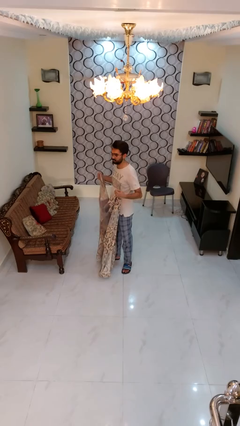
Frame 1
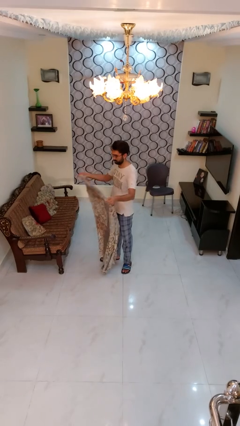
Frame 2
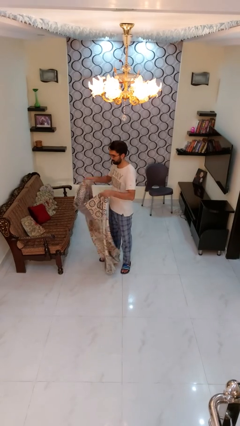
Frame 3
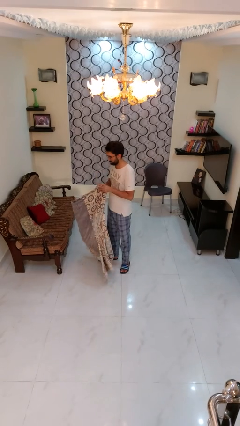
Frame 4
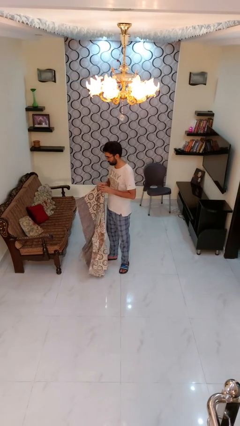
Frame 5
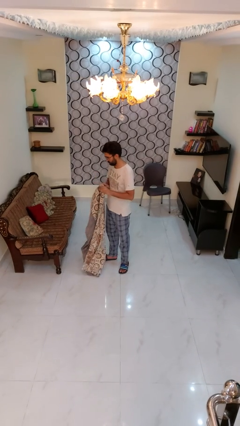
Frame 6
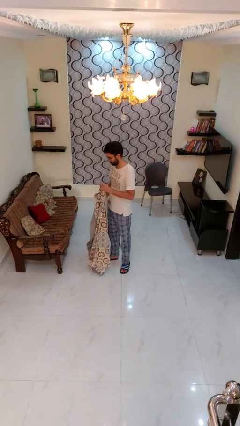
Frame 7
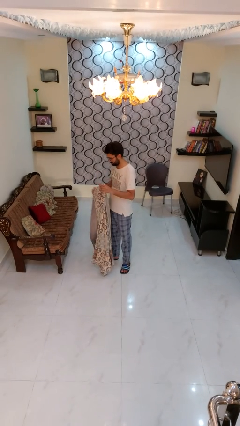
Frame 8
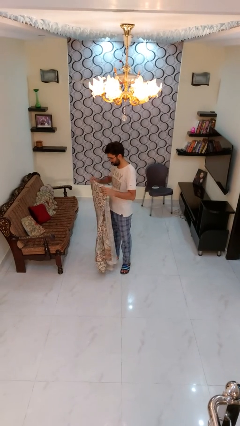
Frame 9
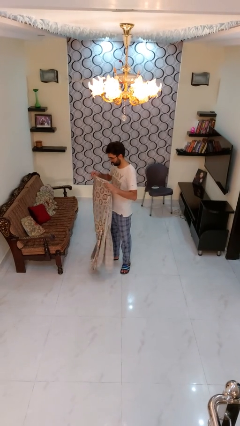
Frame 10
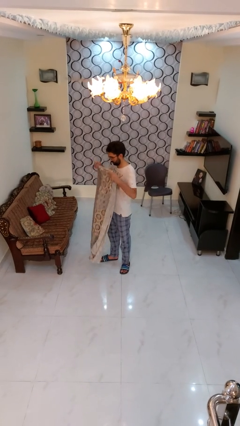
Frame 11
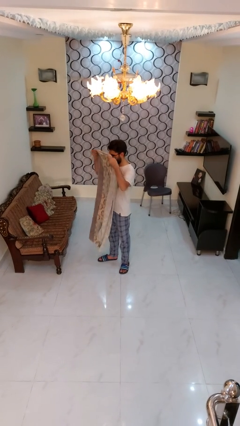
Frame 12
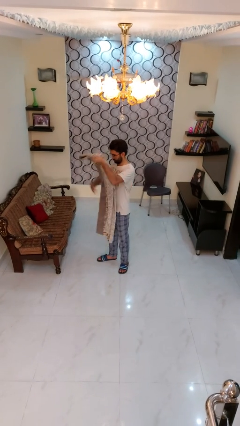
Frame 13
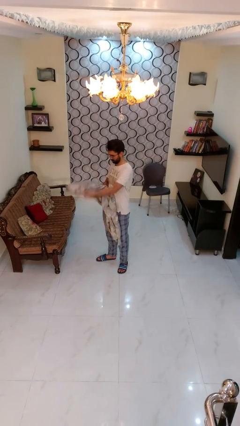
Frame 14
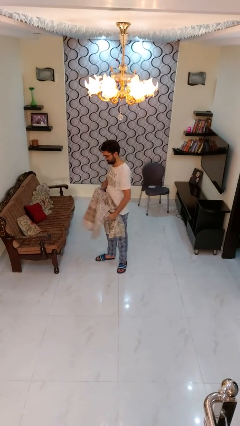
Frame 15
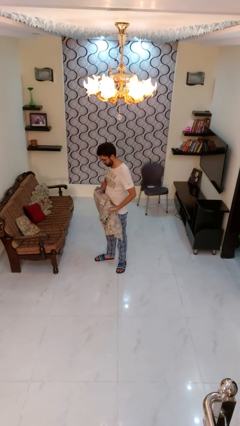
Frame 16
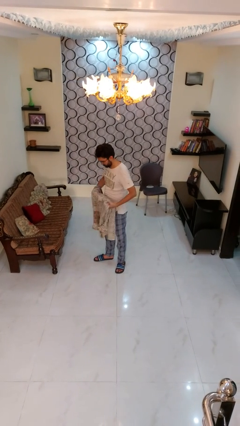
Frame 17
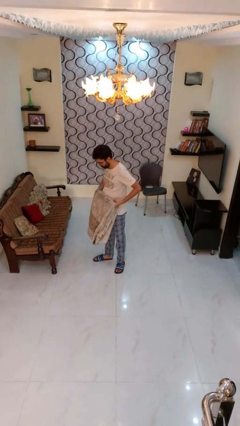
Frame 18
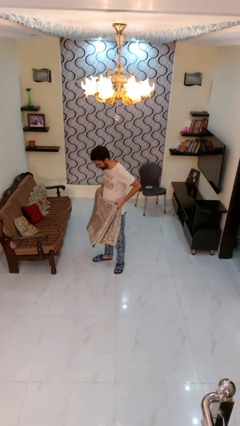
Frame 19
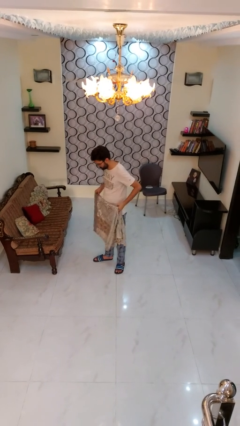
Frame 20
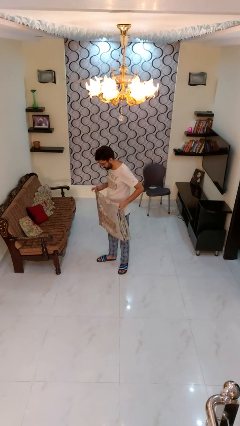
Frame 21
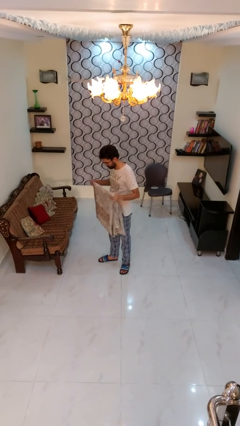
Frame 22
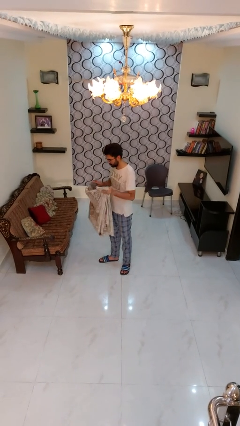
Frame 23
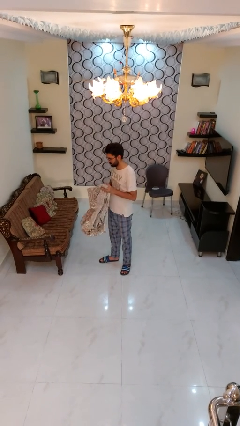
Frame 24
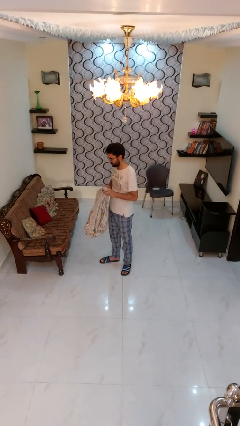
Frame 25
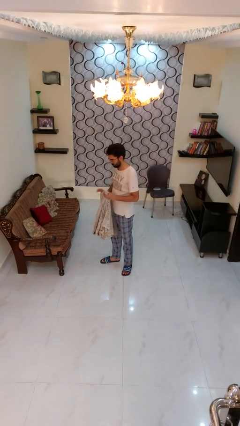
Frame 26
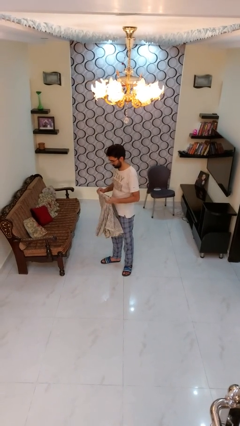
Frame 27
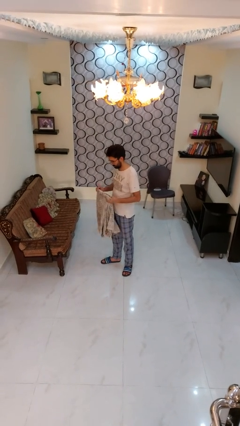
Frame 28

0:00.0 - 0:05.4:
person folds blanket

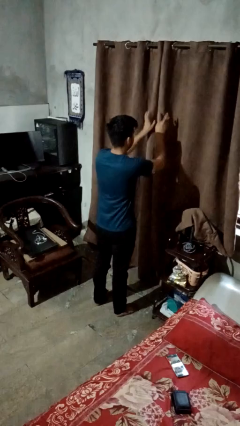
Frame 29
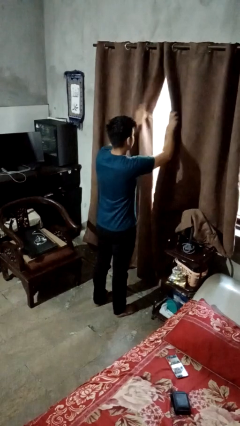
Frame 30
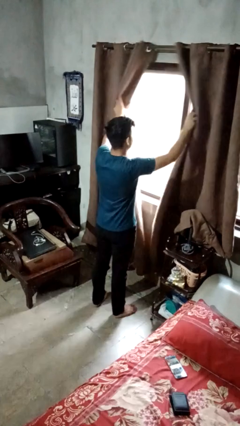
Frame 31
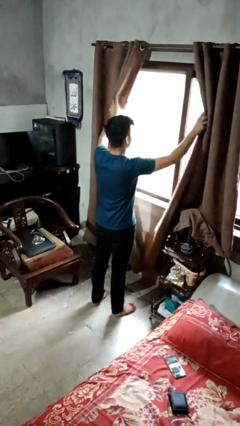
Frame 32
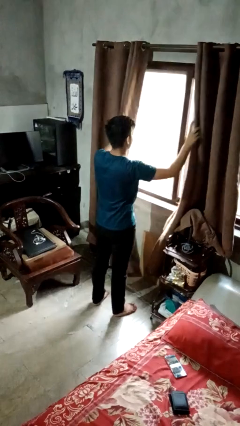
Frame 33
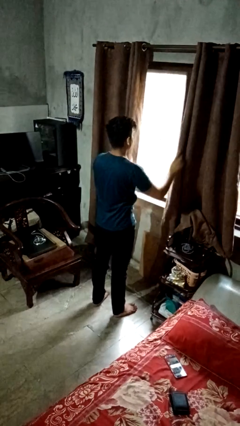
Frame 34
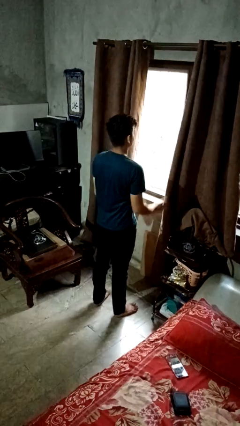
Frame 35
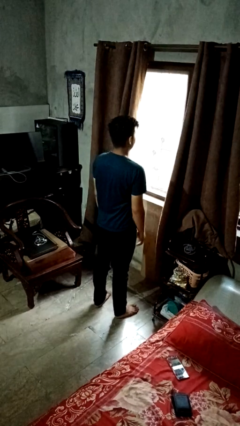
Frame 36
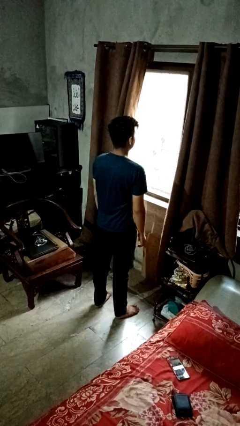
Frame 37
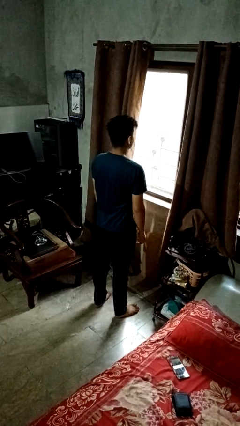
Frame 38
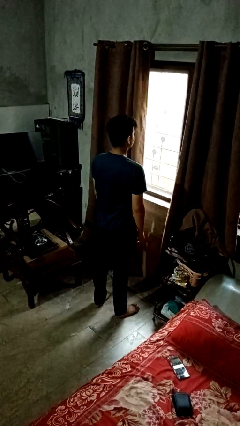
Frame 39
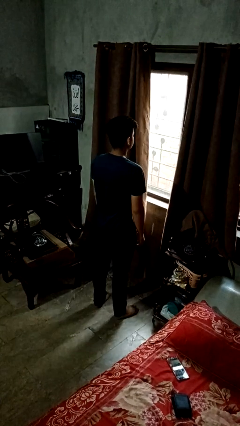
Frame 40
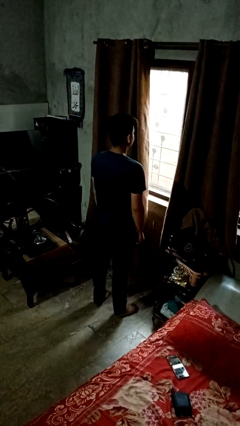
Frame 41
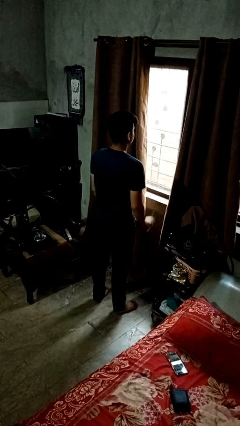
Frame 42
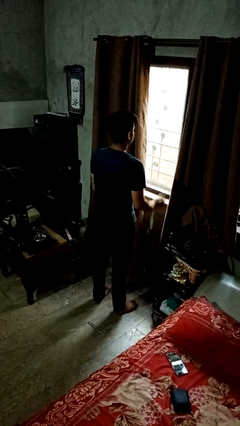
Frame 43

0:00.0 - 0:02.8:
person opens curtains

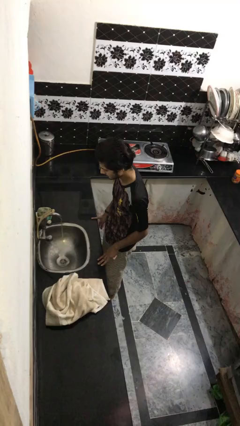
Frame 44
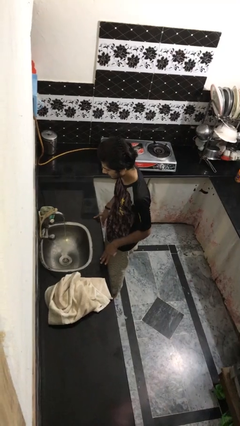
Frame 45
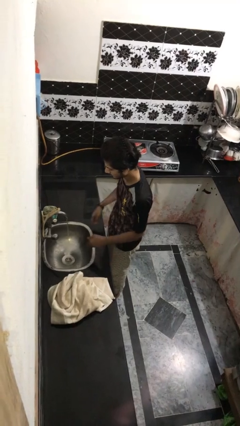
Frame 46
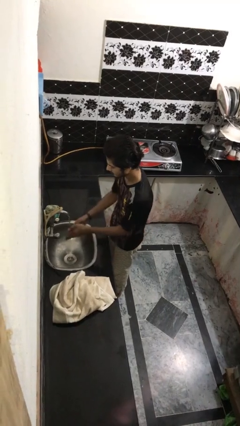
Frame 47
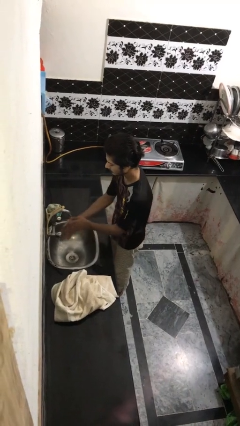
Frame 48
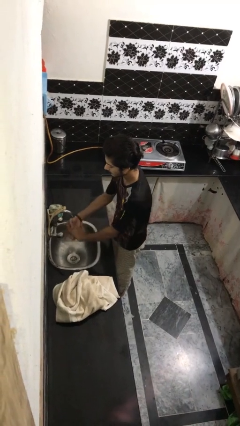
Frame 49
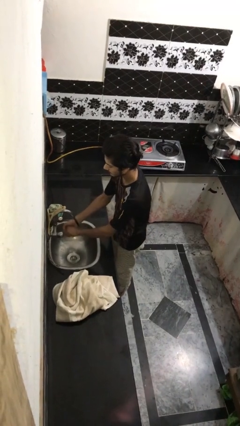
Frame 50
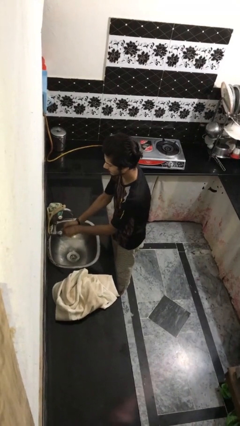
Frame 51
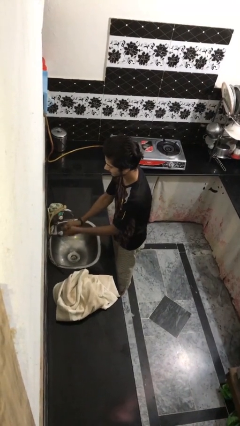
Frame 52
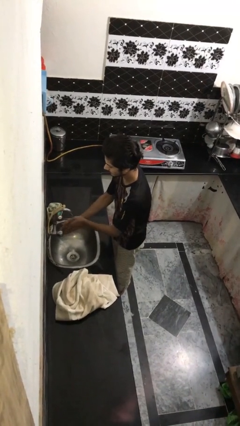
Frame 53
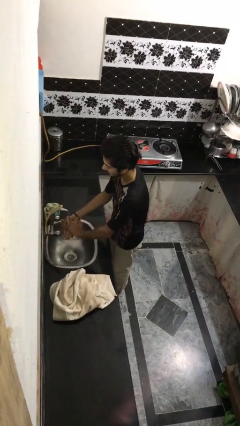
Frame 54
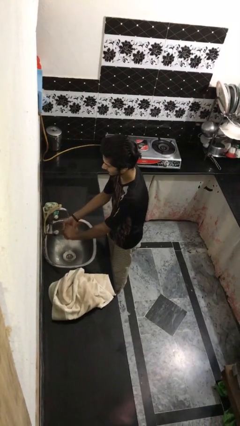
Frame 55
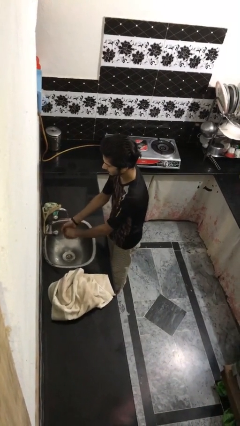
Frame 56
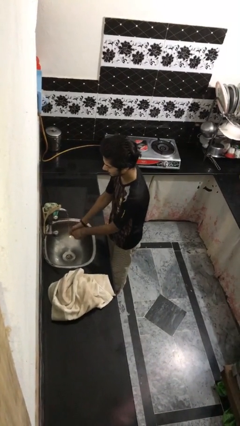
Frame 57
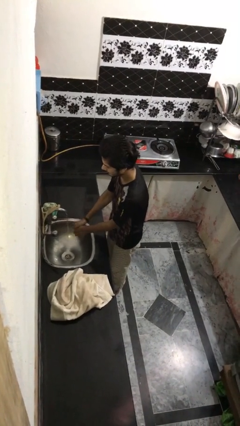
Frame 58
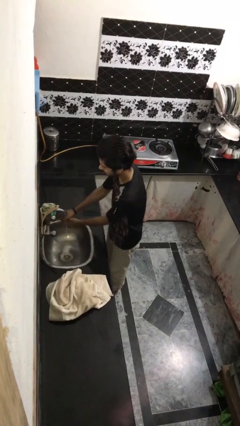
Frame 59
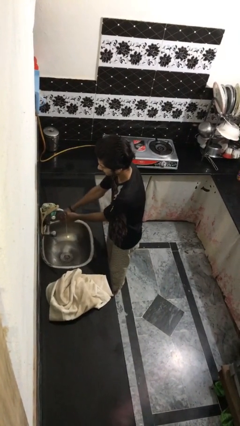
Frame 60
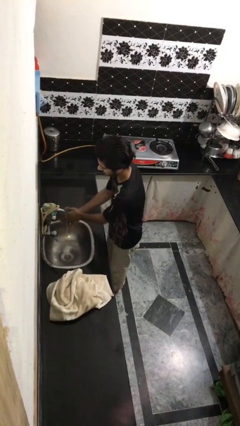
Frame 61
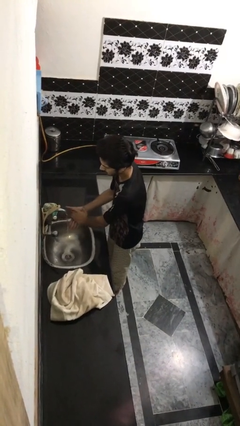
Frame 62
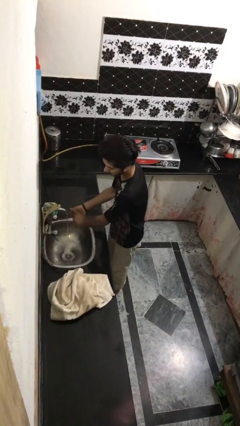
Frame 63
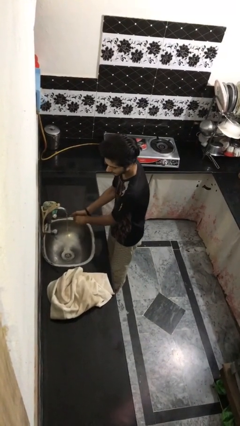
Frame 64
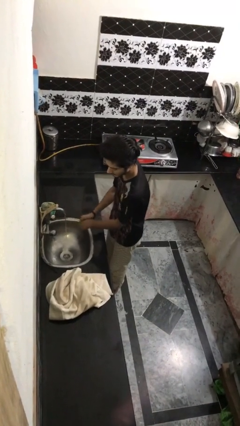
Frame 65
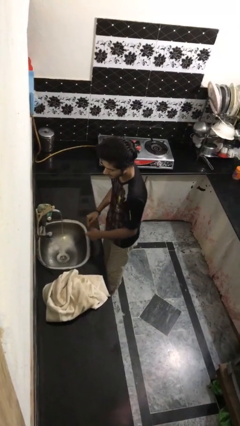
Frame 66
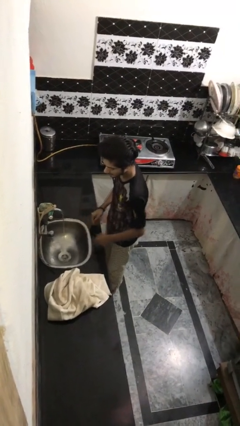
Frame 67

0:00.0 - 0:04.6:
person washes face

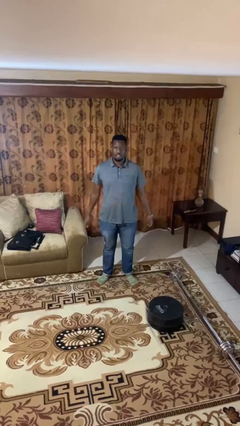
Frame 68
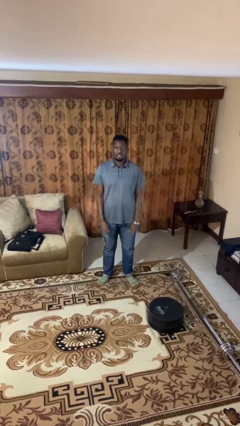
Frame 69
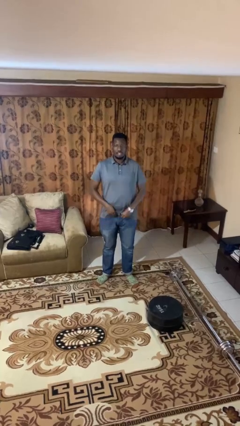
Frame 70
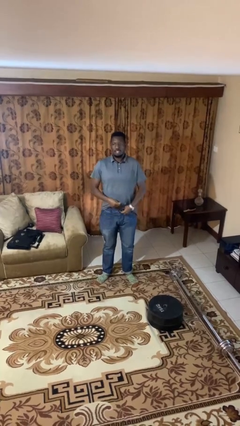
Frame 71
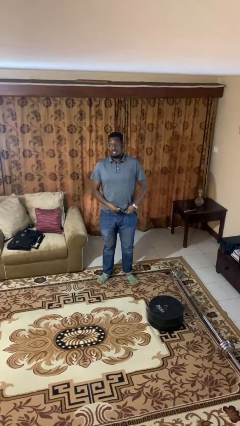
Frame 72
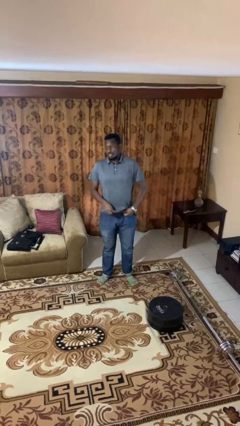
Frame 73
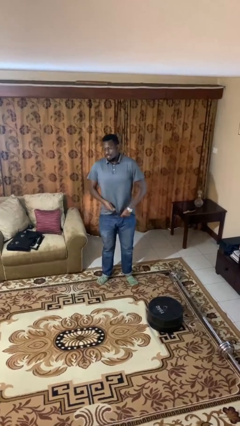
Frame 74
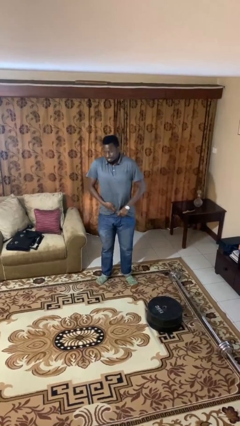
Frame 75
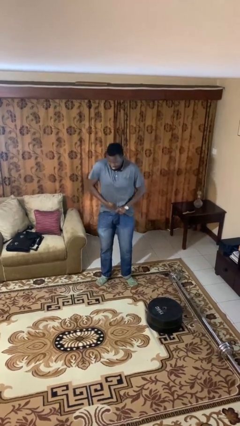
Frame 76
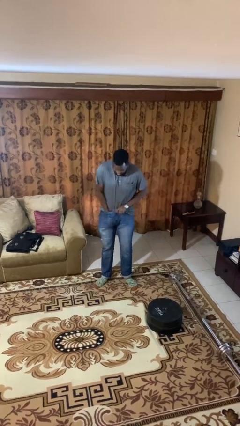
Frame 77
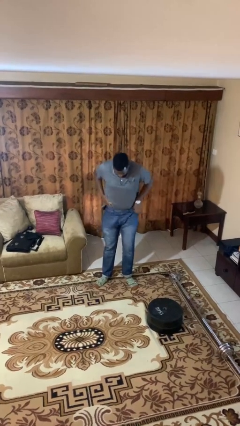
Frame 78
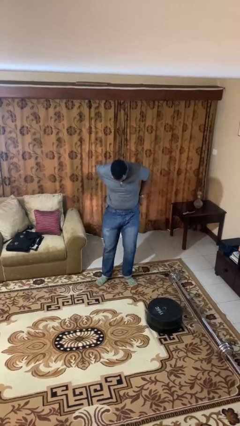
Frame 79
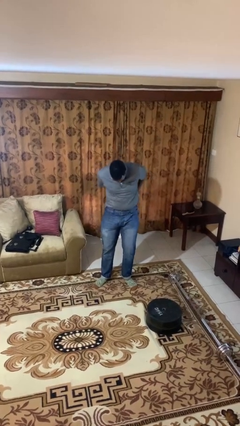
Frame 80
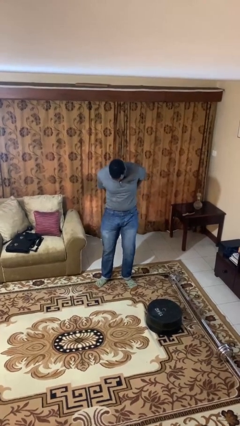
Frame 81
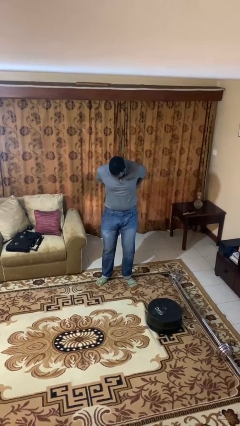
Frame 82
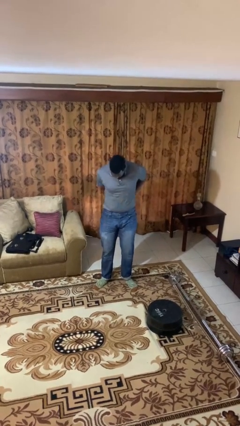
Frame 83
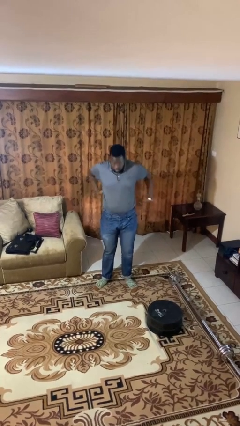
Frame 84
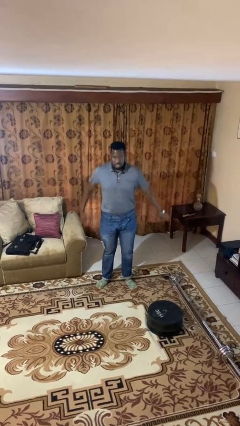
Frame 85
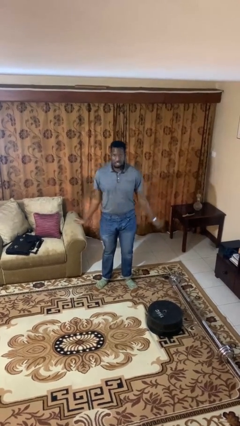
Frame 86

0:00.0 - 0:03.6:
person tucks in shirt

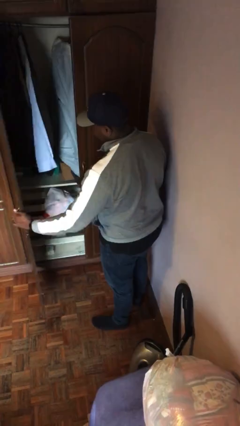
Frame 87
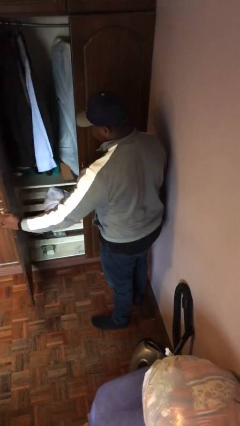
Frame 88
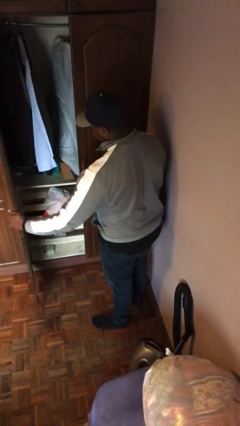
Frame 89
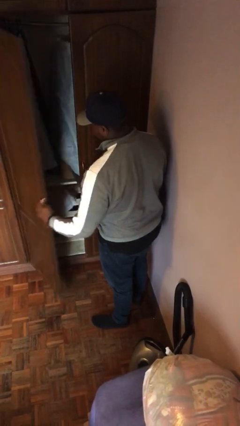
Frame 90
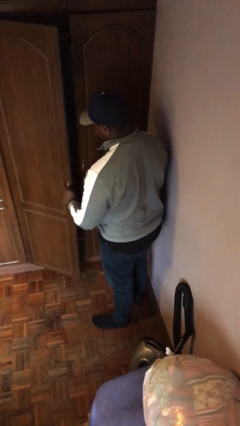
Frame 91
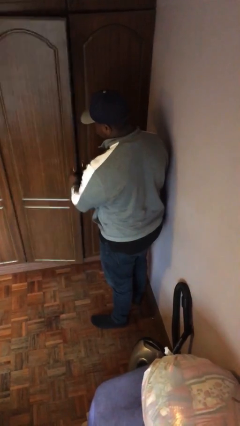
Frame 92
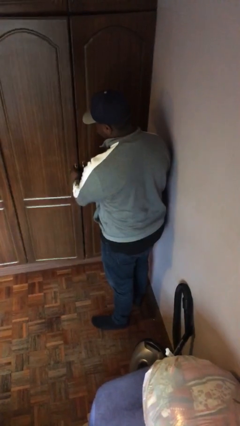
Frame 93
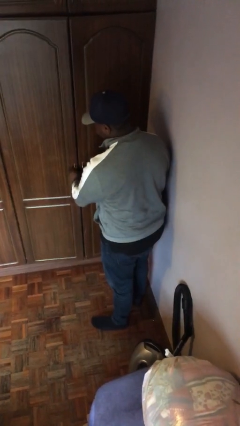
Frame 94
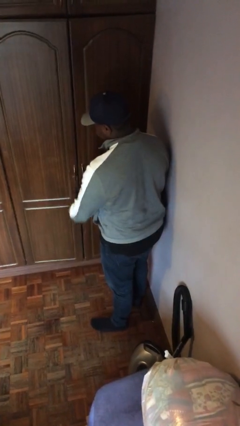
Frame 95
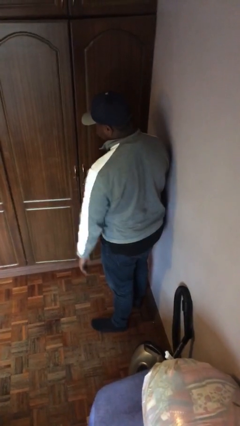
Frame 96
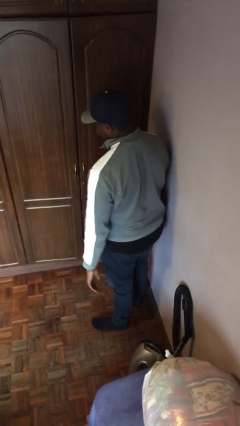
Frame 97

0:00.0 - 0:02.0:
person closes closet door
